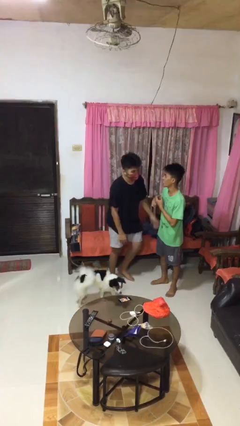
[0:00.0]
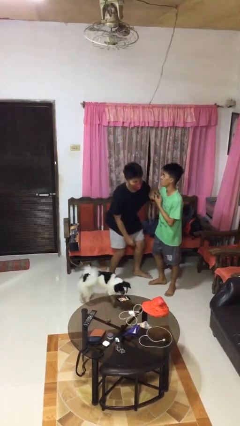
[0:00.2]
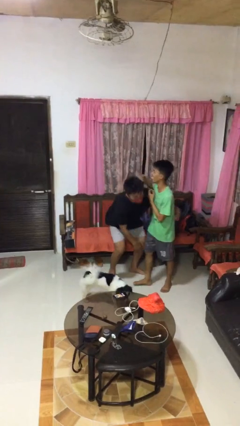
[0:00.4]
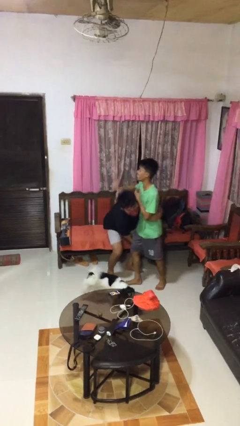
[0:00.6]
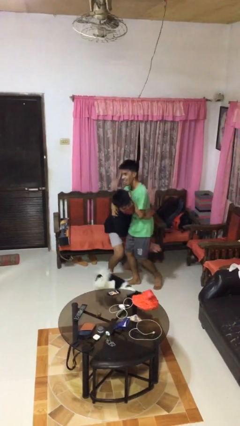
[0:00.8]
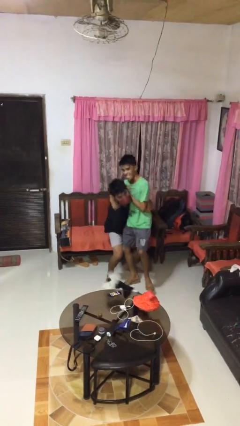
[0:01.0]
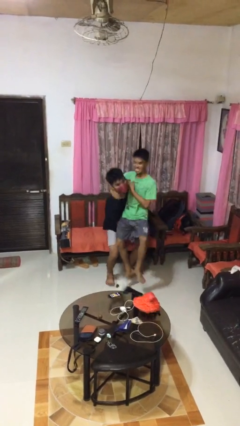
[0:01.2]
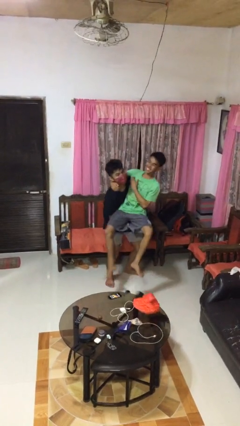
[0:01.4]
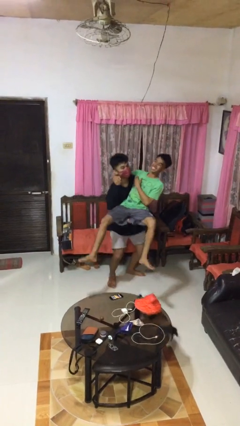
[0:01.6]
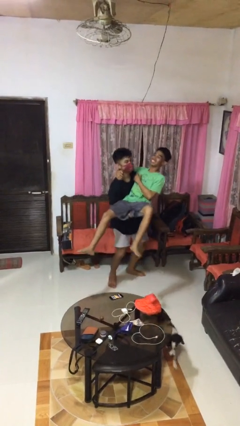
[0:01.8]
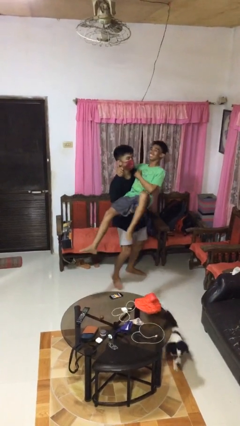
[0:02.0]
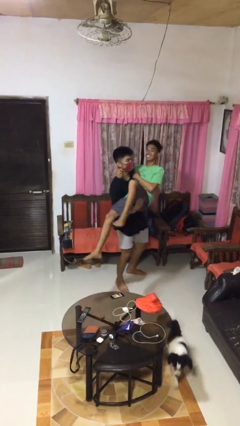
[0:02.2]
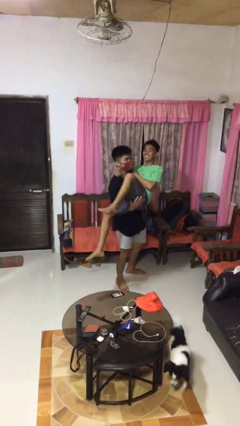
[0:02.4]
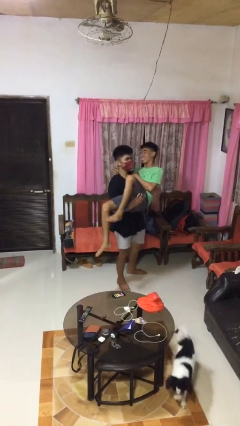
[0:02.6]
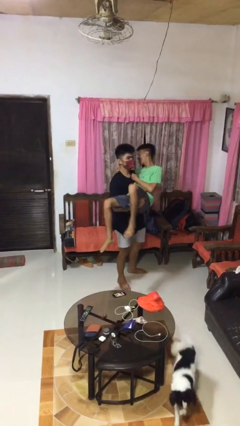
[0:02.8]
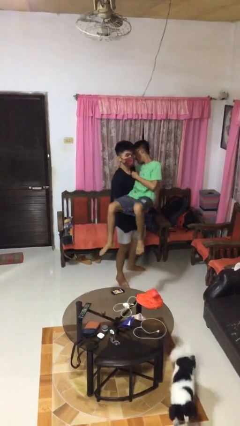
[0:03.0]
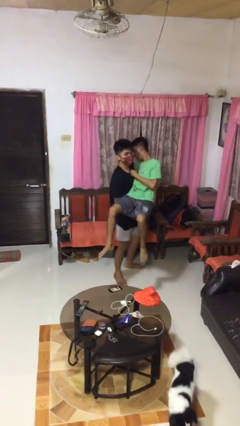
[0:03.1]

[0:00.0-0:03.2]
person picks up person

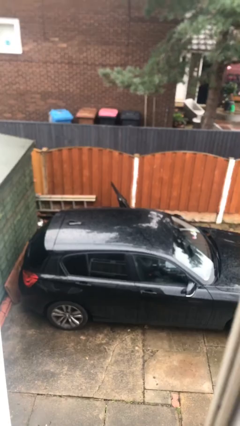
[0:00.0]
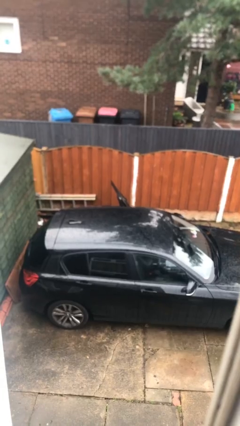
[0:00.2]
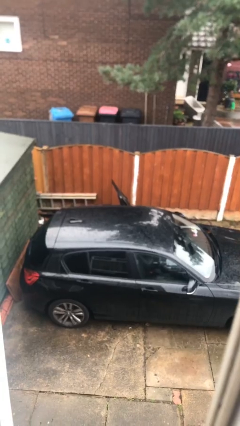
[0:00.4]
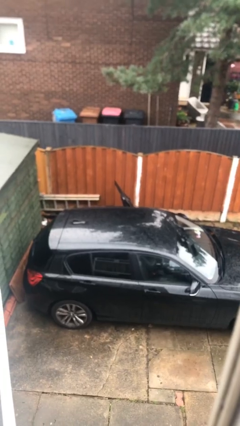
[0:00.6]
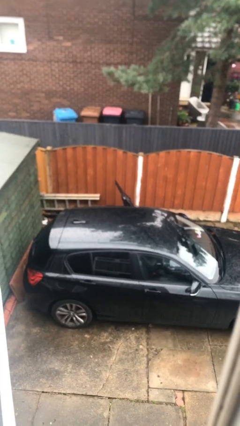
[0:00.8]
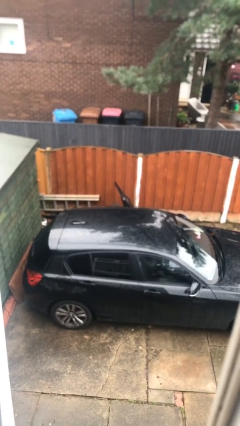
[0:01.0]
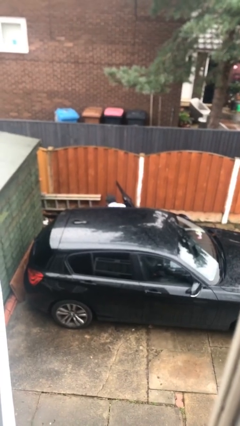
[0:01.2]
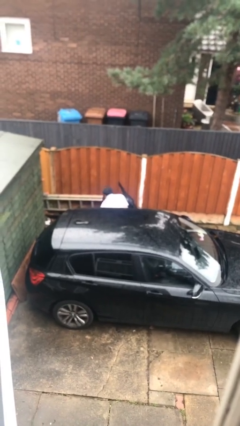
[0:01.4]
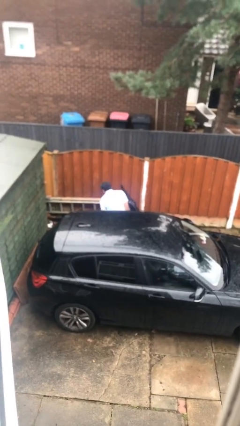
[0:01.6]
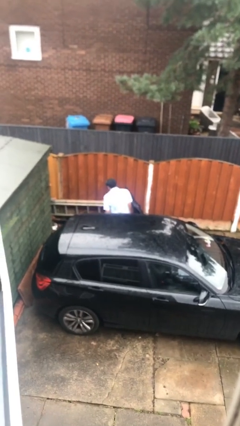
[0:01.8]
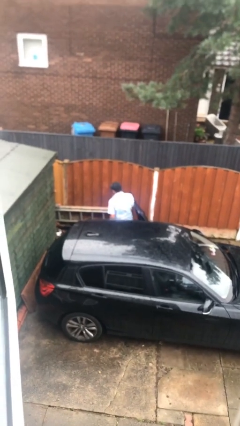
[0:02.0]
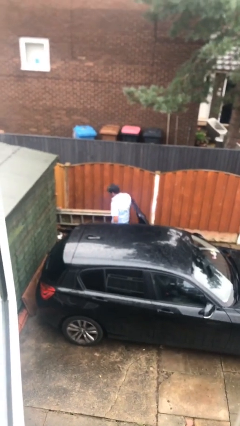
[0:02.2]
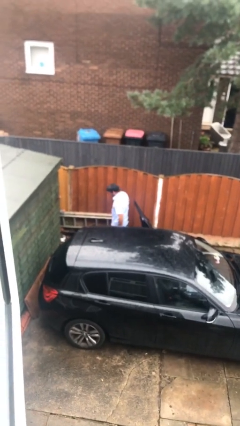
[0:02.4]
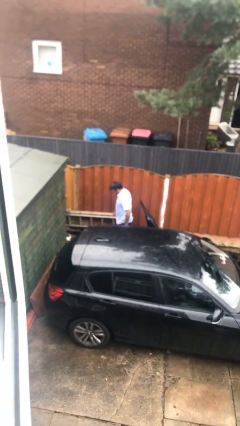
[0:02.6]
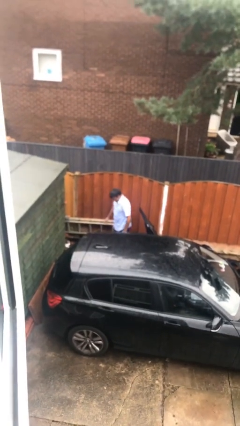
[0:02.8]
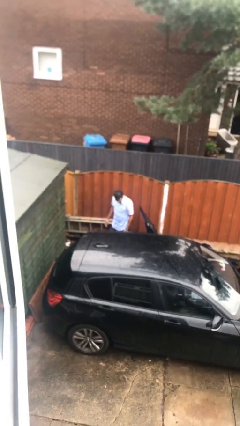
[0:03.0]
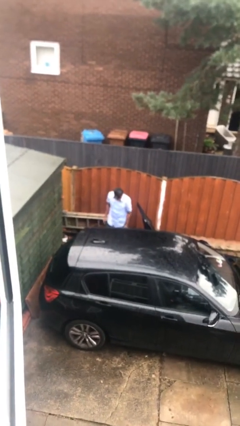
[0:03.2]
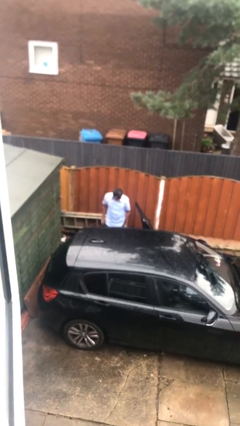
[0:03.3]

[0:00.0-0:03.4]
person exits car

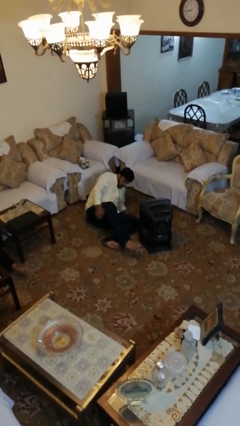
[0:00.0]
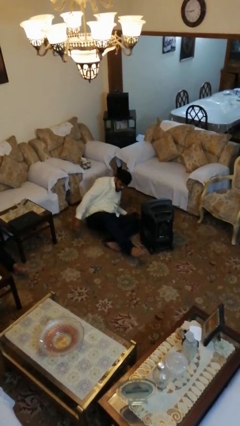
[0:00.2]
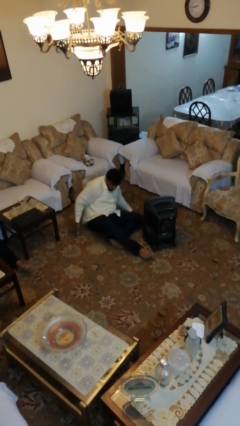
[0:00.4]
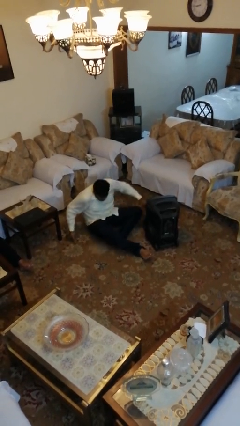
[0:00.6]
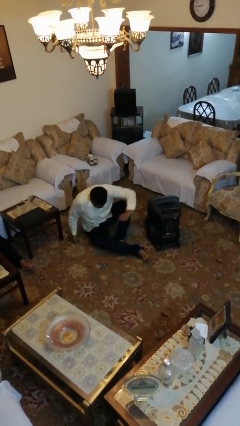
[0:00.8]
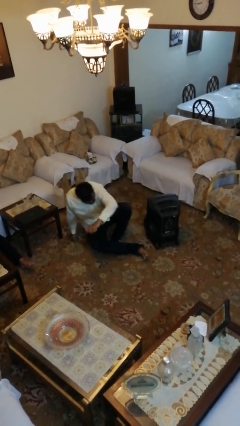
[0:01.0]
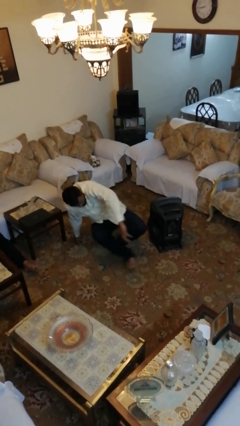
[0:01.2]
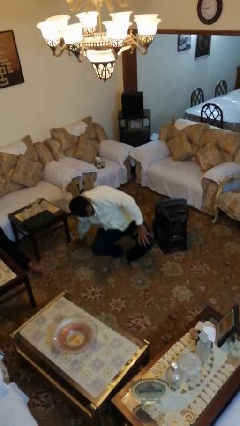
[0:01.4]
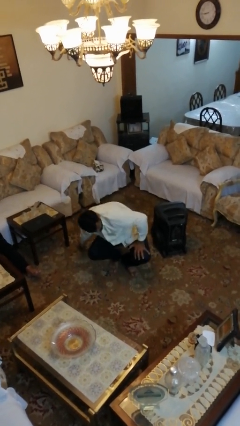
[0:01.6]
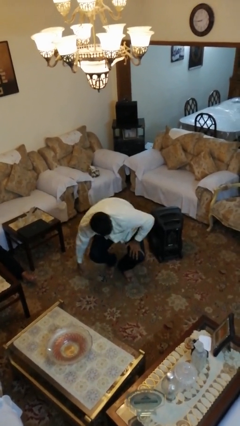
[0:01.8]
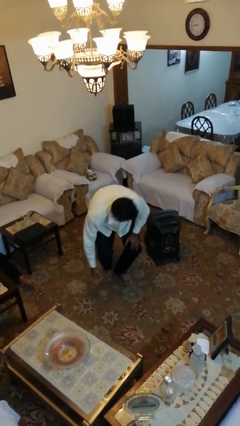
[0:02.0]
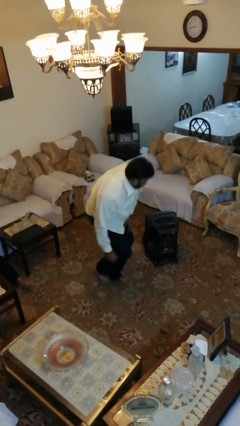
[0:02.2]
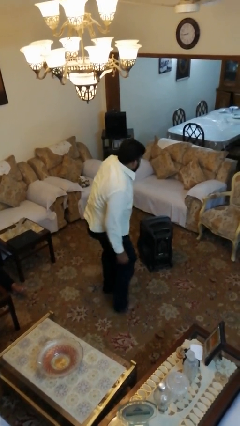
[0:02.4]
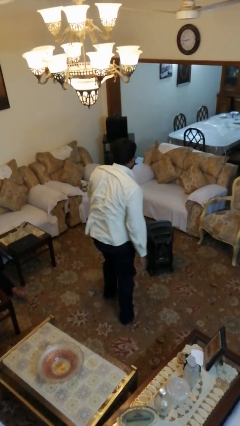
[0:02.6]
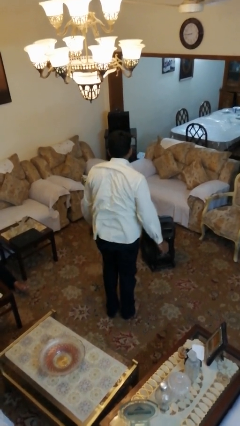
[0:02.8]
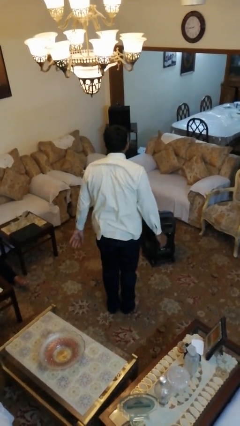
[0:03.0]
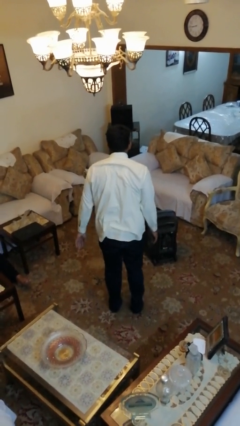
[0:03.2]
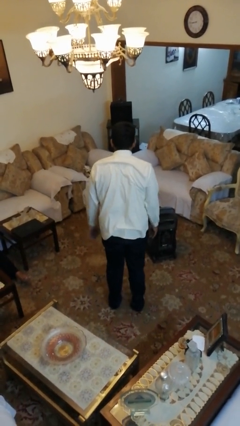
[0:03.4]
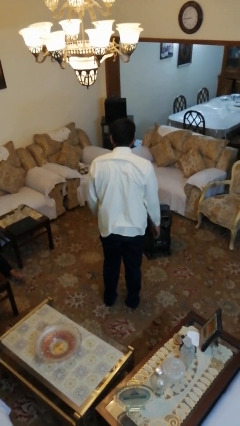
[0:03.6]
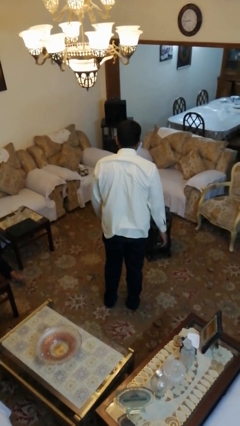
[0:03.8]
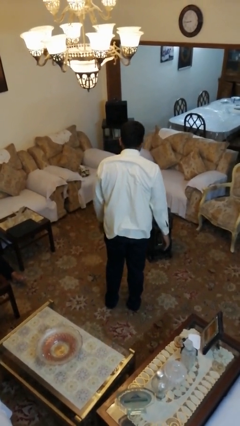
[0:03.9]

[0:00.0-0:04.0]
person stands up from floor

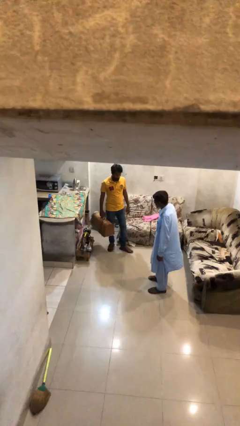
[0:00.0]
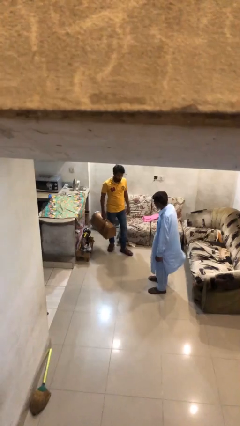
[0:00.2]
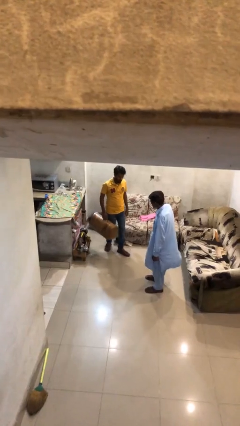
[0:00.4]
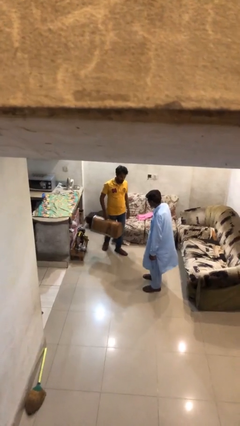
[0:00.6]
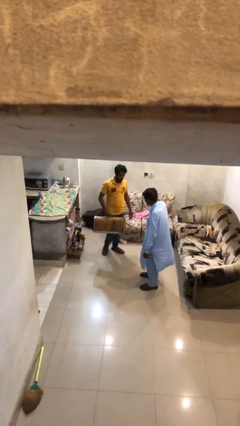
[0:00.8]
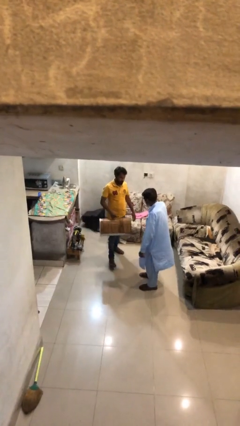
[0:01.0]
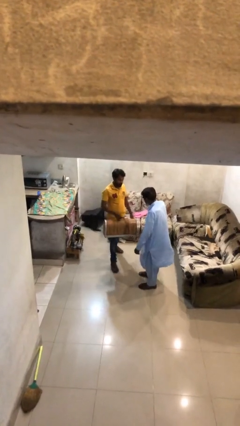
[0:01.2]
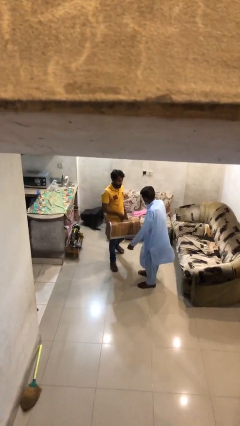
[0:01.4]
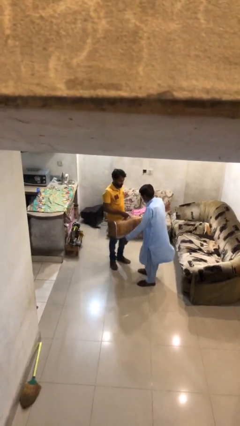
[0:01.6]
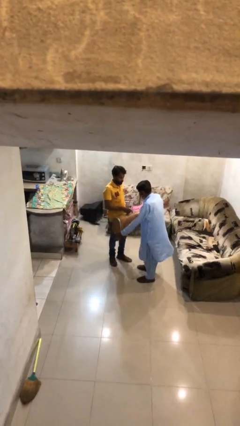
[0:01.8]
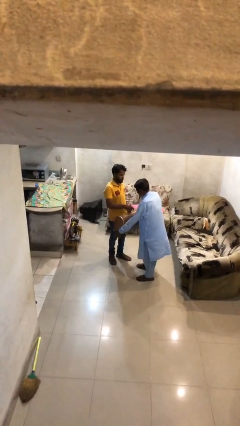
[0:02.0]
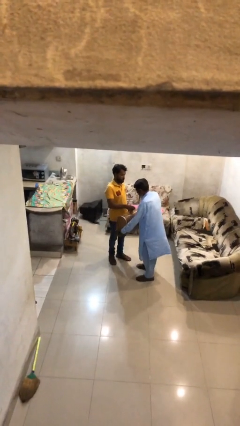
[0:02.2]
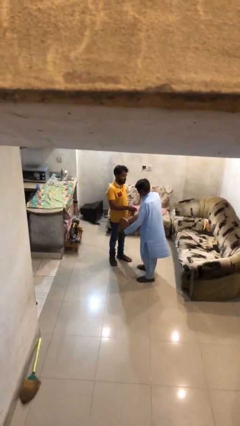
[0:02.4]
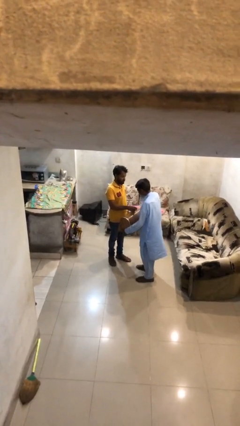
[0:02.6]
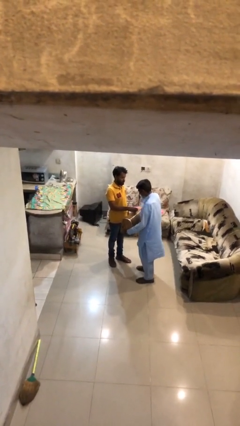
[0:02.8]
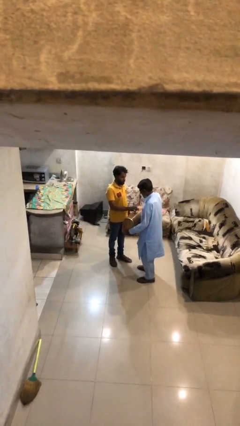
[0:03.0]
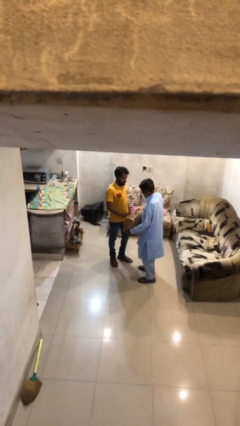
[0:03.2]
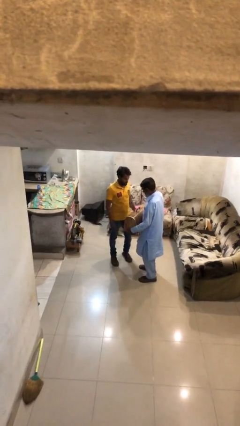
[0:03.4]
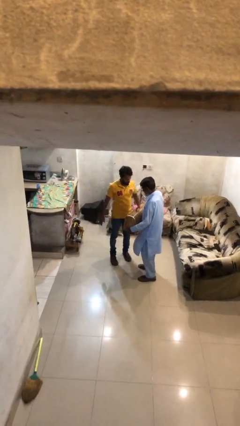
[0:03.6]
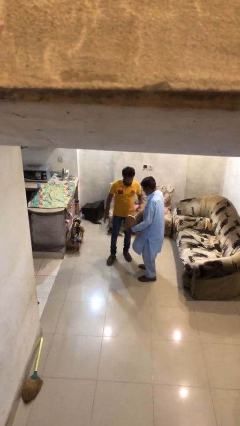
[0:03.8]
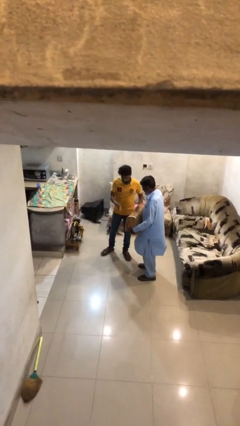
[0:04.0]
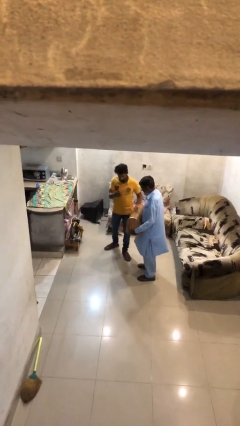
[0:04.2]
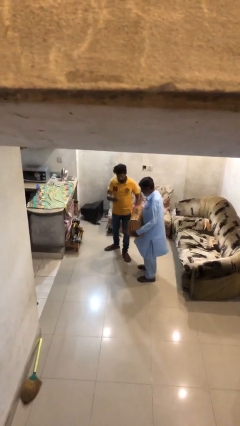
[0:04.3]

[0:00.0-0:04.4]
person transfers object to person

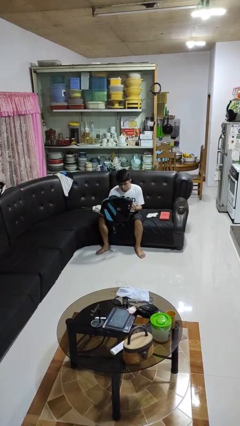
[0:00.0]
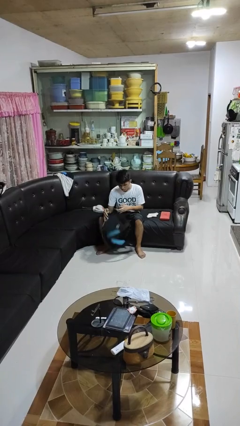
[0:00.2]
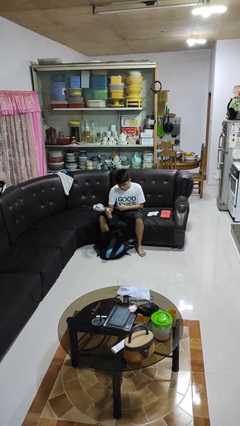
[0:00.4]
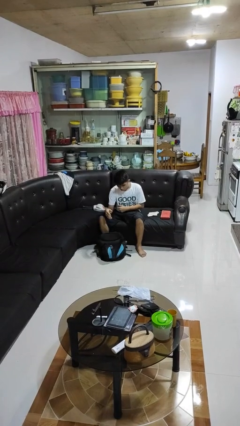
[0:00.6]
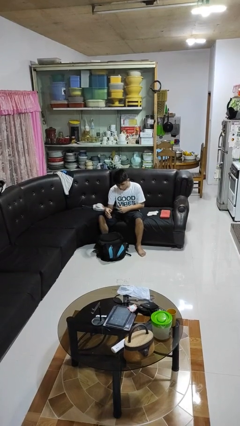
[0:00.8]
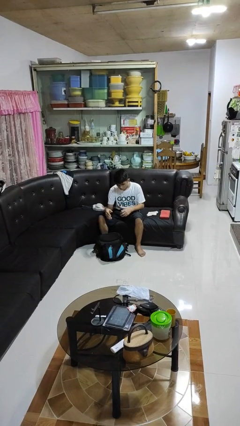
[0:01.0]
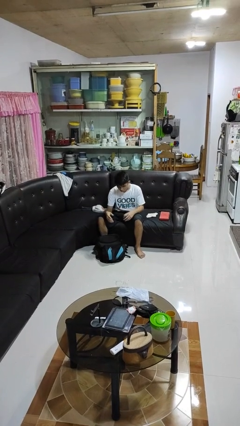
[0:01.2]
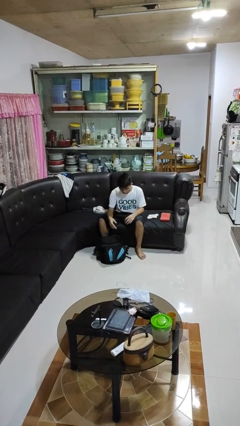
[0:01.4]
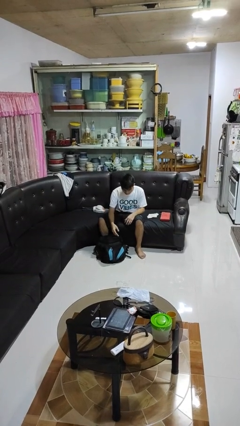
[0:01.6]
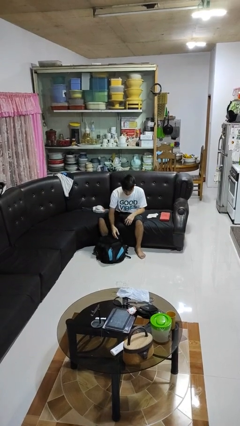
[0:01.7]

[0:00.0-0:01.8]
person drops object

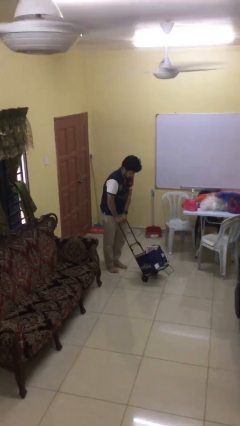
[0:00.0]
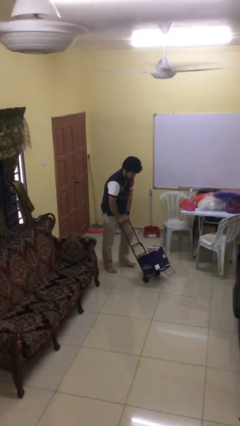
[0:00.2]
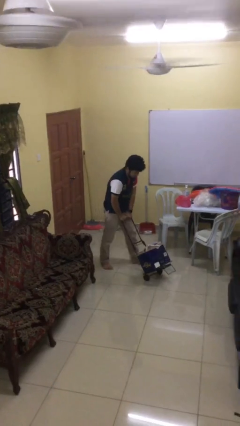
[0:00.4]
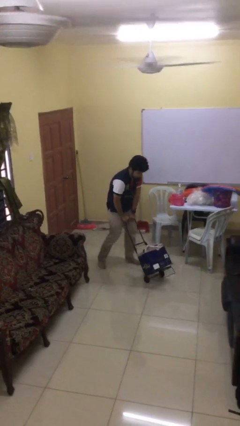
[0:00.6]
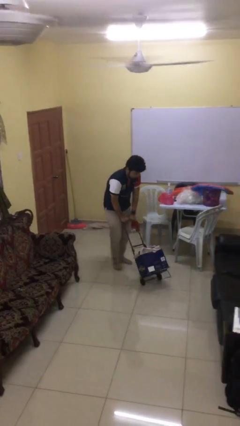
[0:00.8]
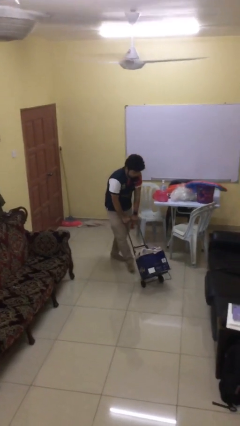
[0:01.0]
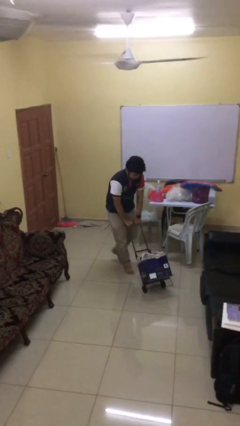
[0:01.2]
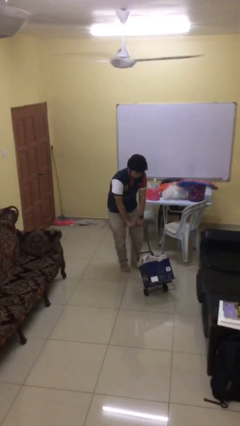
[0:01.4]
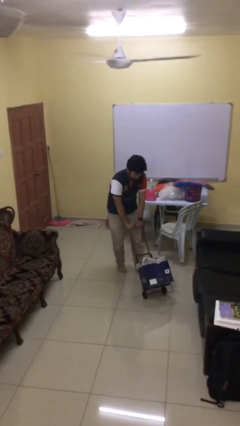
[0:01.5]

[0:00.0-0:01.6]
person pushes wheeled cart
